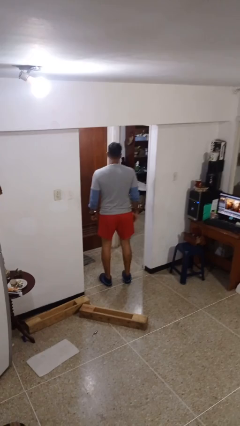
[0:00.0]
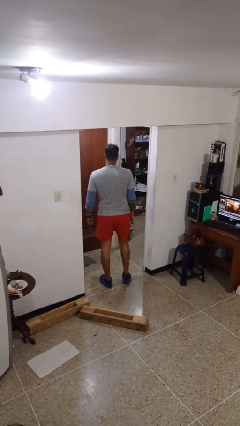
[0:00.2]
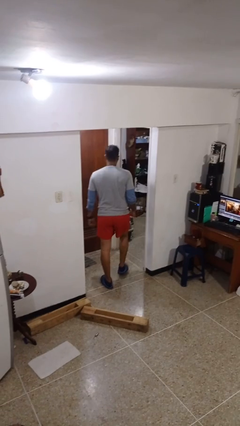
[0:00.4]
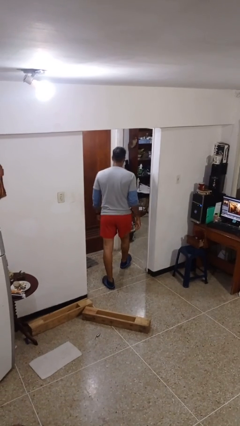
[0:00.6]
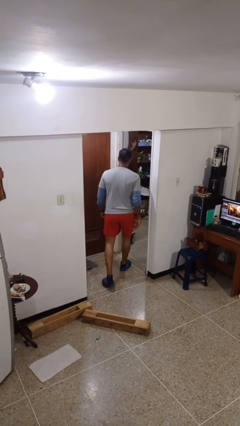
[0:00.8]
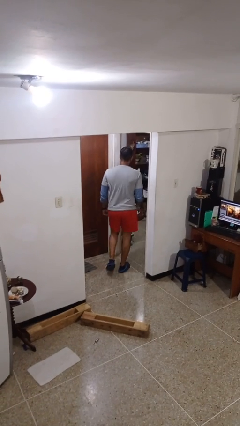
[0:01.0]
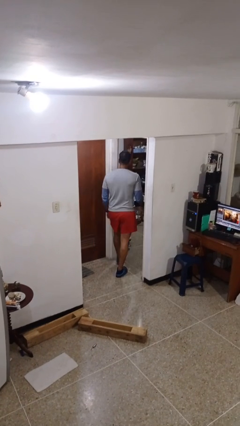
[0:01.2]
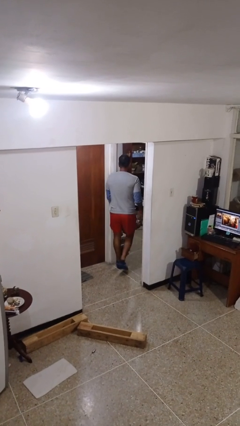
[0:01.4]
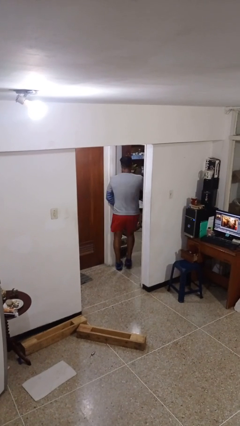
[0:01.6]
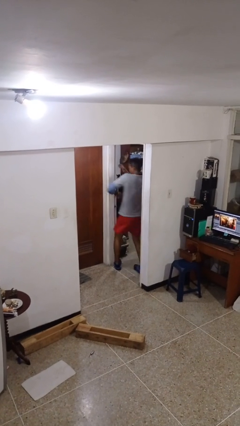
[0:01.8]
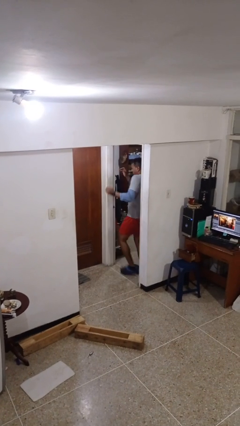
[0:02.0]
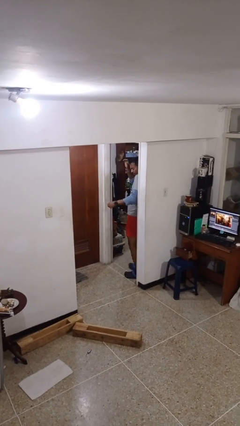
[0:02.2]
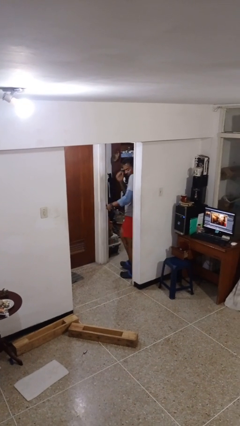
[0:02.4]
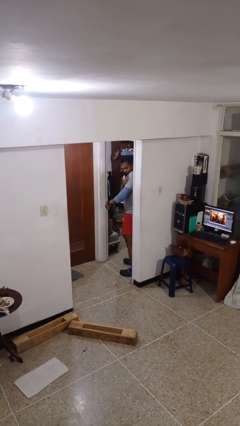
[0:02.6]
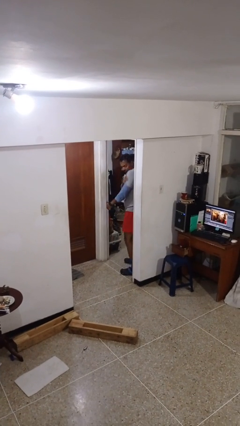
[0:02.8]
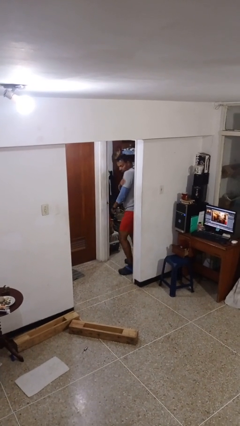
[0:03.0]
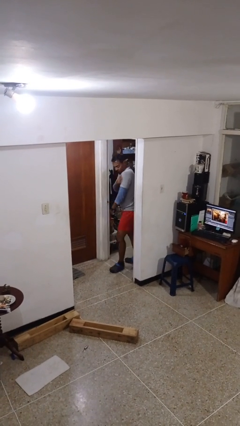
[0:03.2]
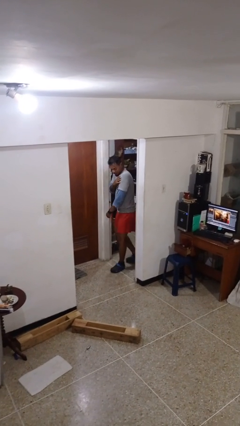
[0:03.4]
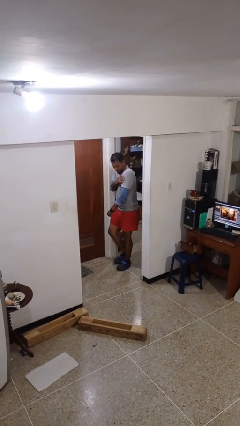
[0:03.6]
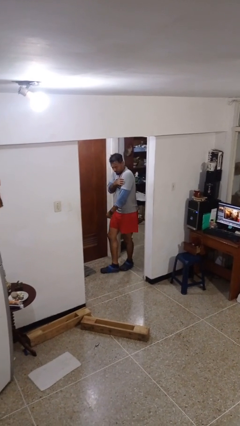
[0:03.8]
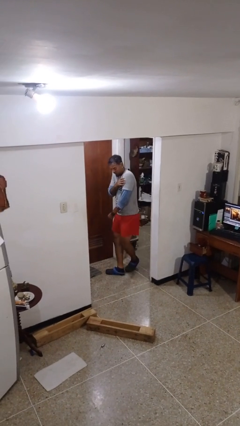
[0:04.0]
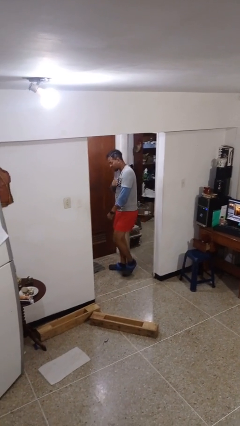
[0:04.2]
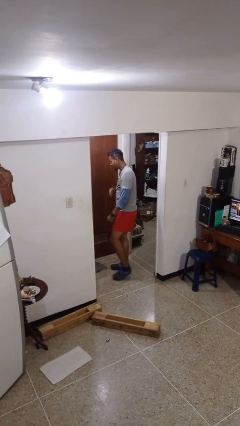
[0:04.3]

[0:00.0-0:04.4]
person bumps into wall

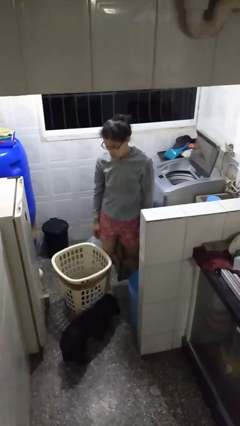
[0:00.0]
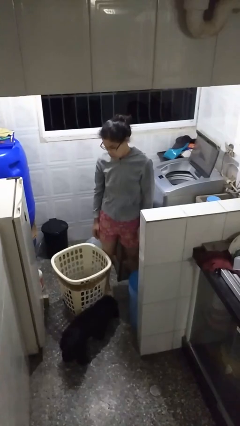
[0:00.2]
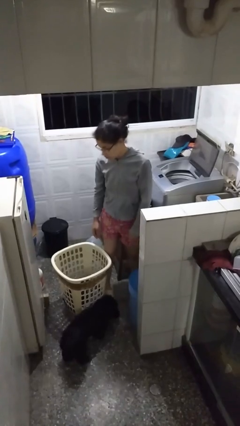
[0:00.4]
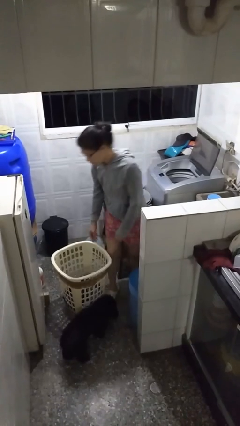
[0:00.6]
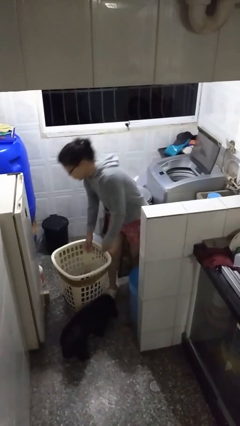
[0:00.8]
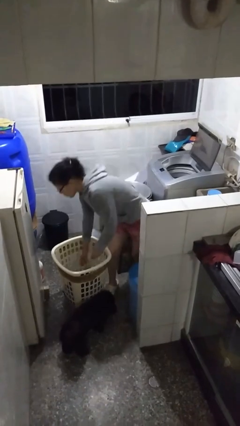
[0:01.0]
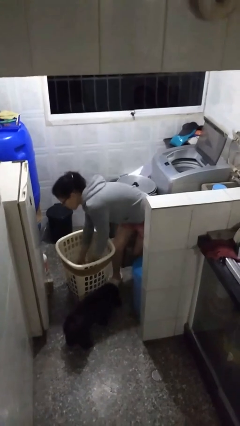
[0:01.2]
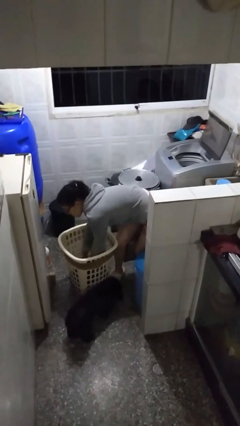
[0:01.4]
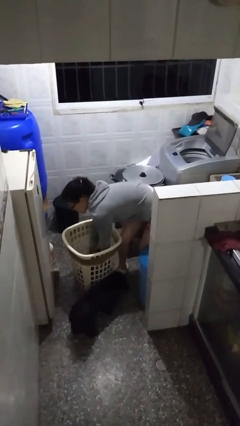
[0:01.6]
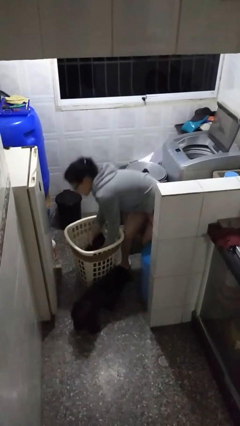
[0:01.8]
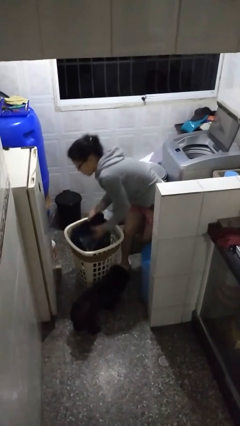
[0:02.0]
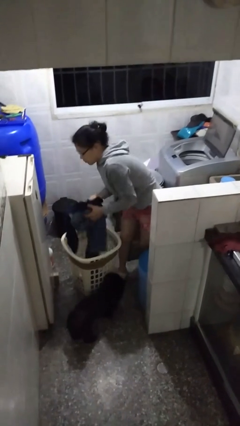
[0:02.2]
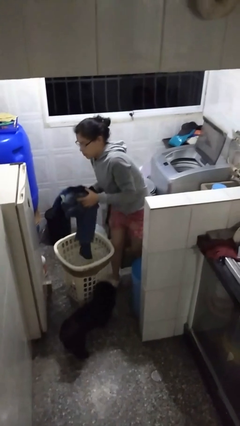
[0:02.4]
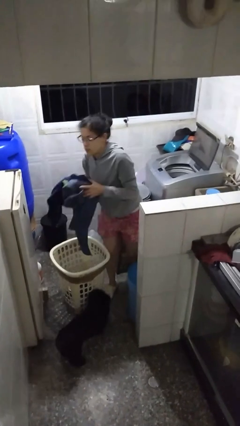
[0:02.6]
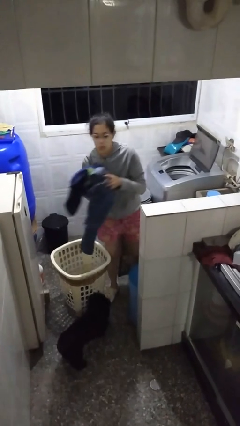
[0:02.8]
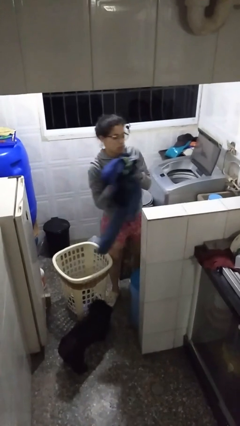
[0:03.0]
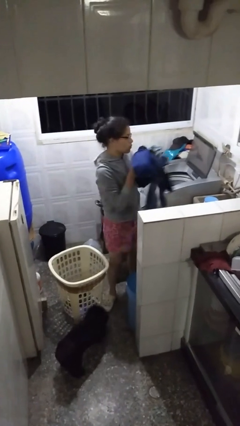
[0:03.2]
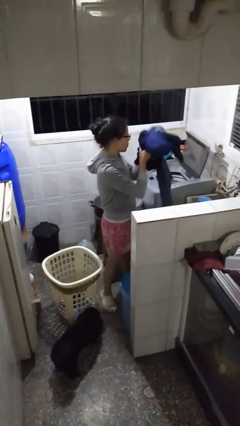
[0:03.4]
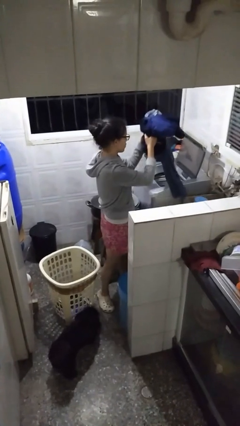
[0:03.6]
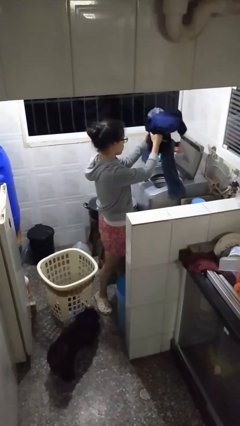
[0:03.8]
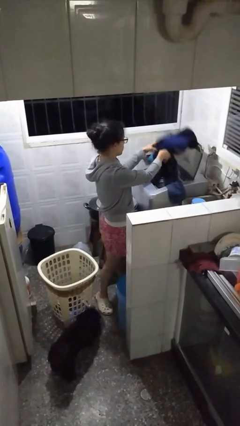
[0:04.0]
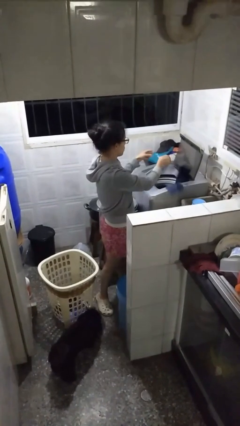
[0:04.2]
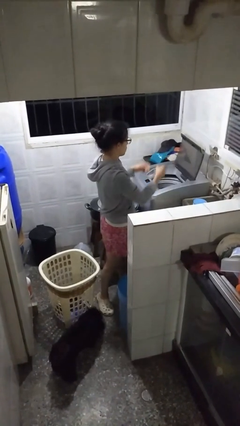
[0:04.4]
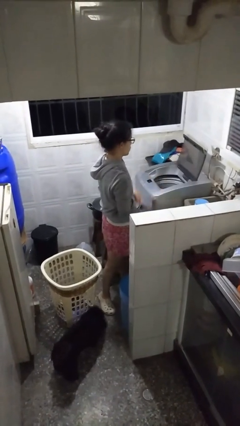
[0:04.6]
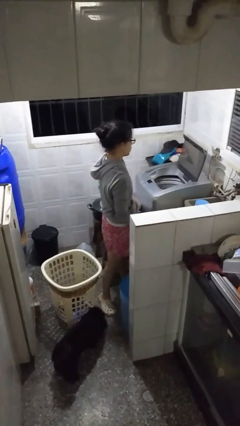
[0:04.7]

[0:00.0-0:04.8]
person loads clotheswasher

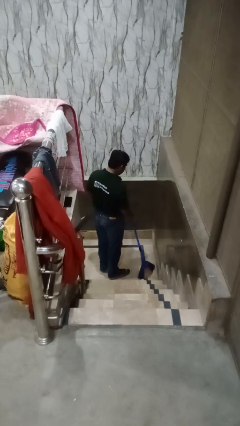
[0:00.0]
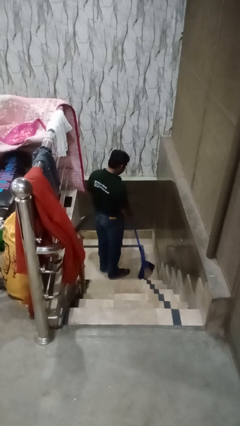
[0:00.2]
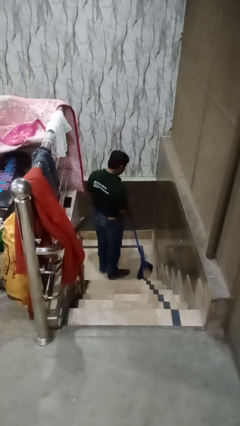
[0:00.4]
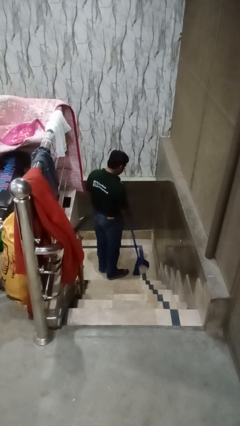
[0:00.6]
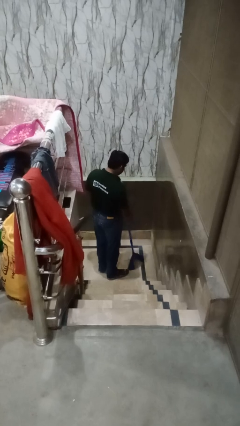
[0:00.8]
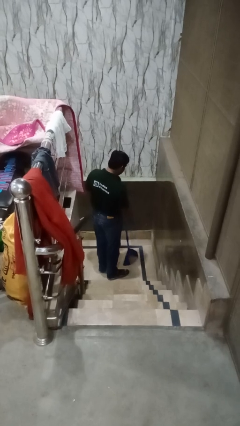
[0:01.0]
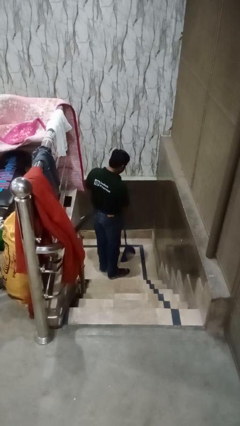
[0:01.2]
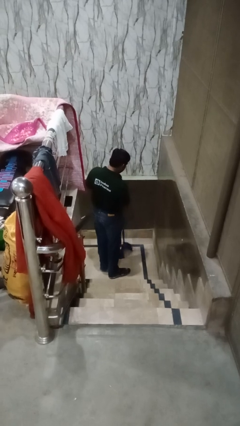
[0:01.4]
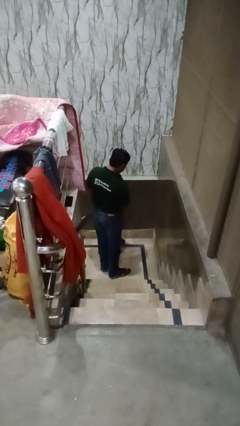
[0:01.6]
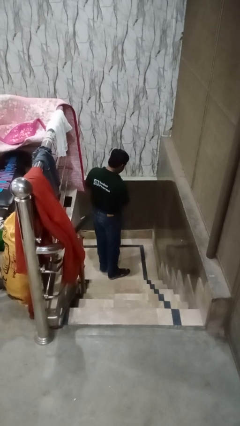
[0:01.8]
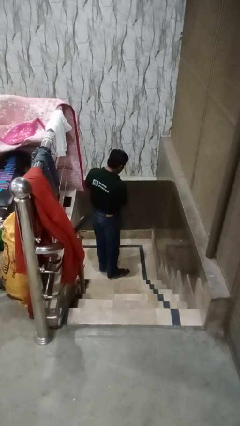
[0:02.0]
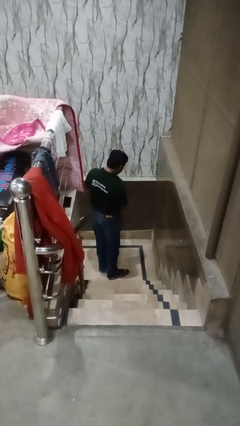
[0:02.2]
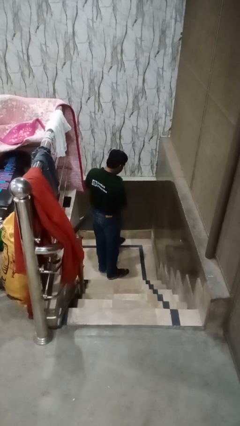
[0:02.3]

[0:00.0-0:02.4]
person sweeps floor

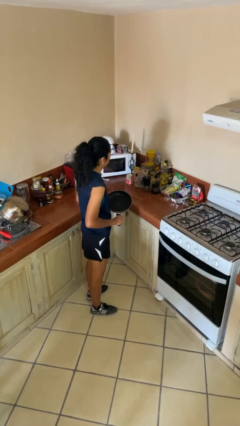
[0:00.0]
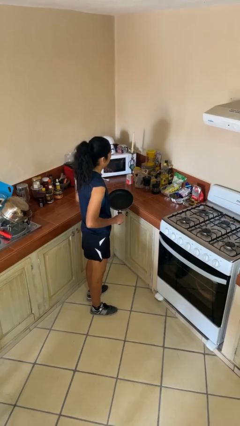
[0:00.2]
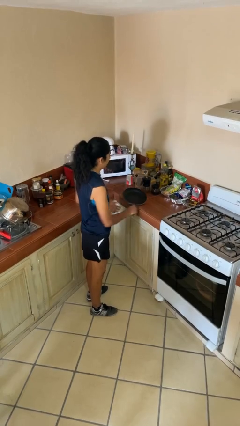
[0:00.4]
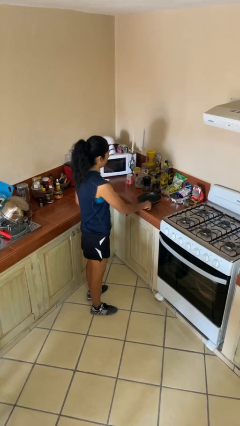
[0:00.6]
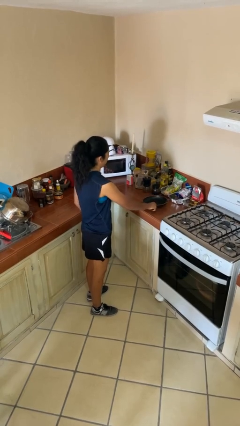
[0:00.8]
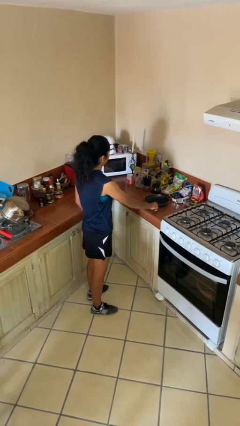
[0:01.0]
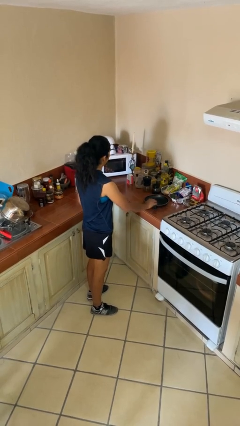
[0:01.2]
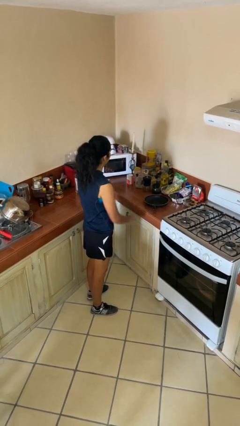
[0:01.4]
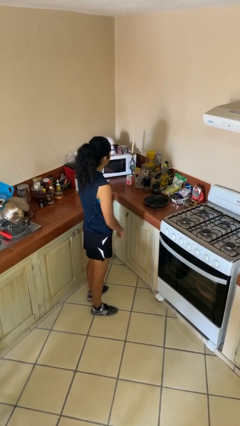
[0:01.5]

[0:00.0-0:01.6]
person puts down object on countertop

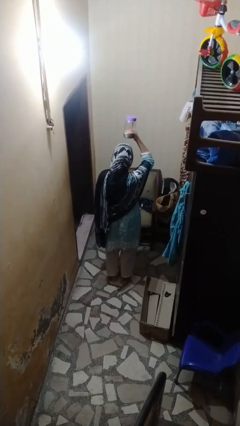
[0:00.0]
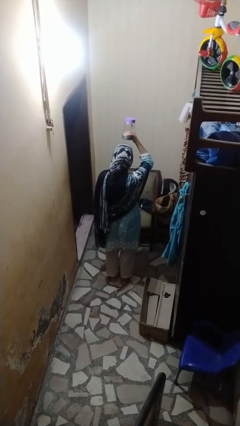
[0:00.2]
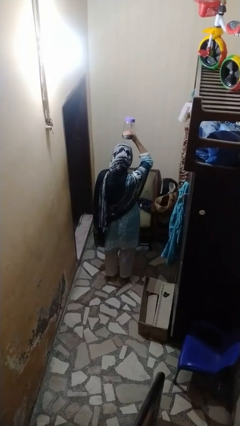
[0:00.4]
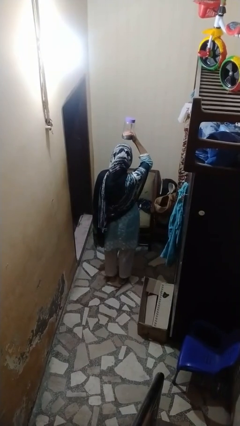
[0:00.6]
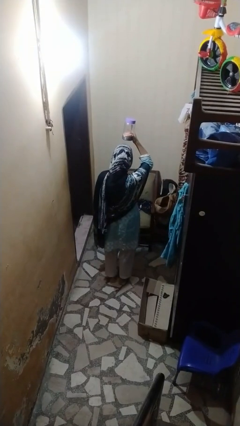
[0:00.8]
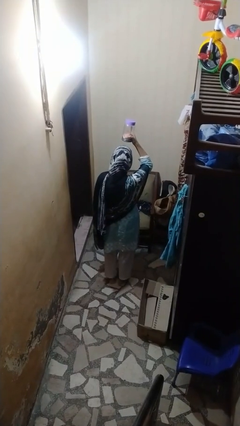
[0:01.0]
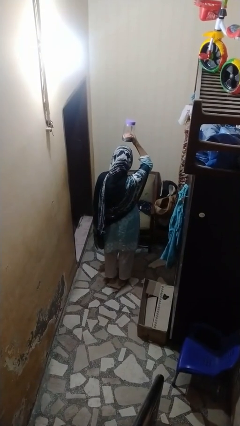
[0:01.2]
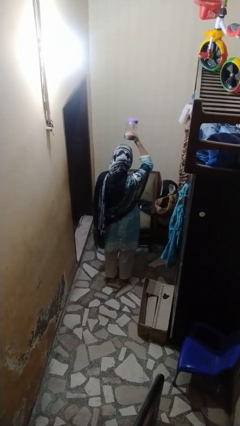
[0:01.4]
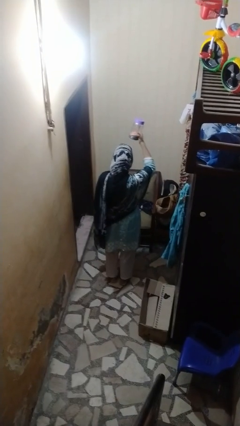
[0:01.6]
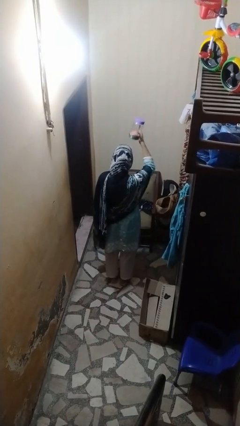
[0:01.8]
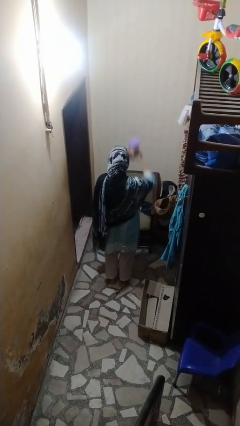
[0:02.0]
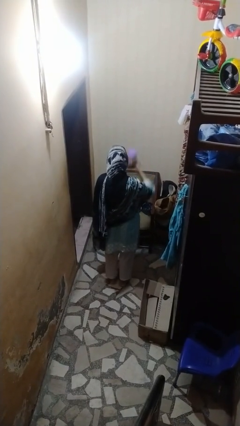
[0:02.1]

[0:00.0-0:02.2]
person holds object above head

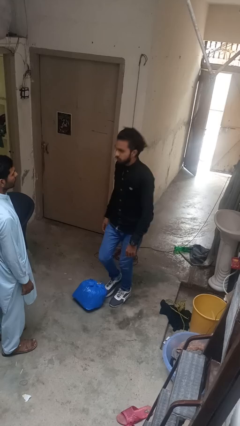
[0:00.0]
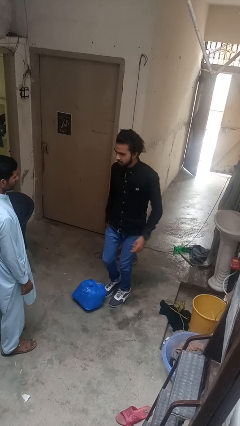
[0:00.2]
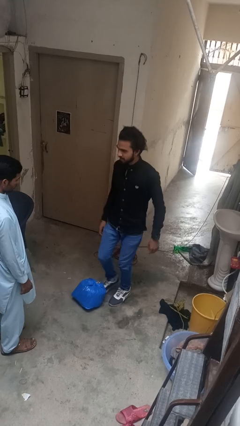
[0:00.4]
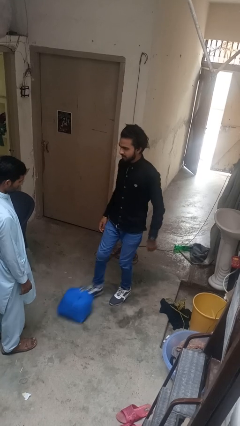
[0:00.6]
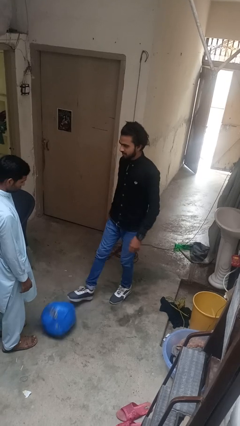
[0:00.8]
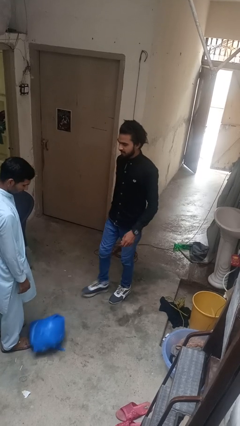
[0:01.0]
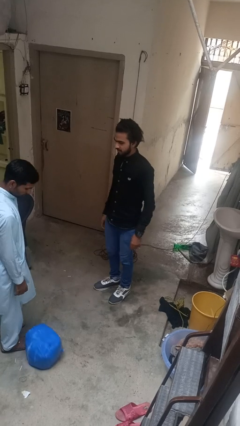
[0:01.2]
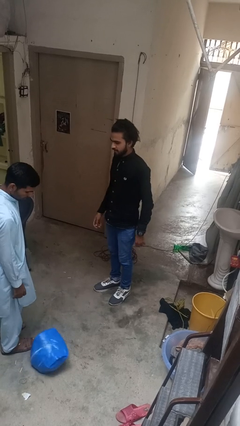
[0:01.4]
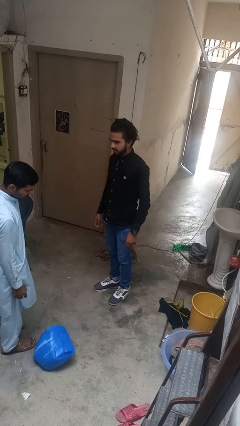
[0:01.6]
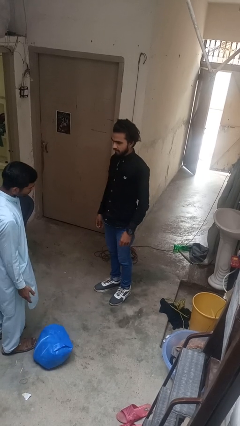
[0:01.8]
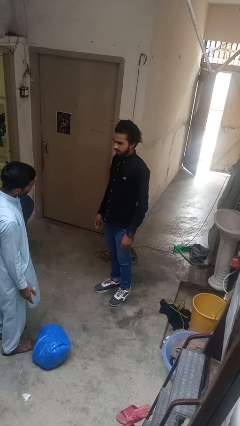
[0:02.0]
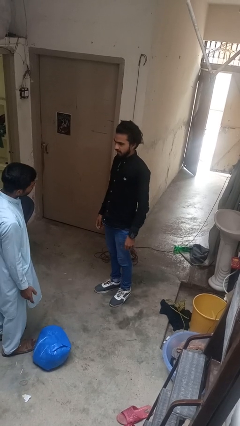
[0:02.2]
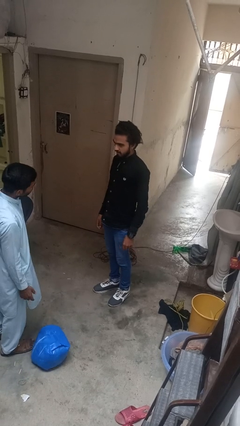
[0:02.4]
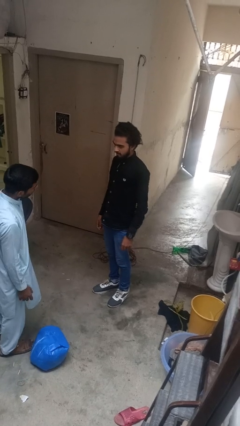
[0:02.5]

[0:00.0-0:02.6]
person kicks object to person
